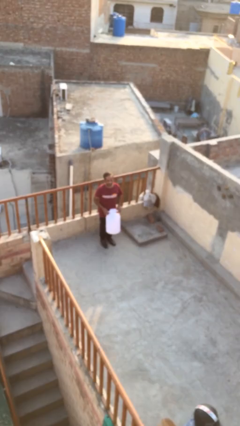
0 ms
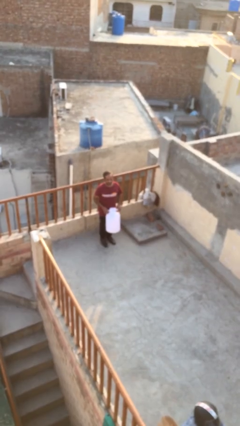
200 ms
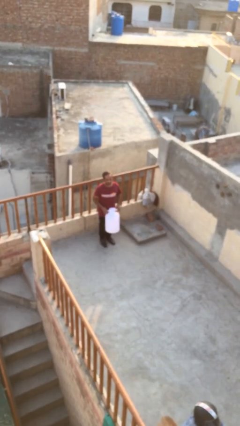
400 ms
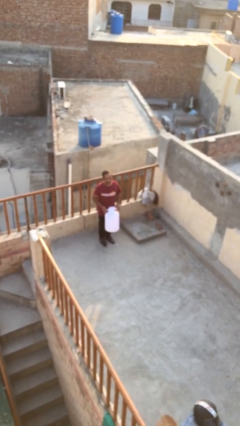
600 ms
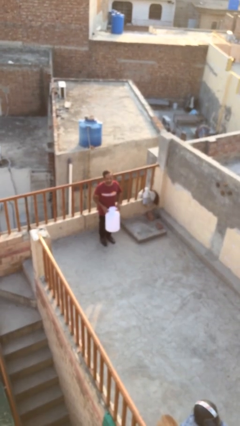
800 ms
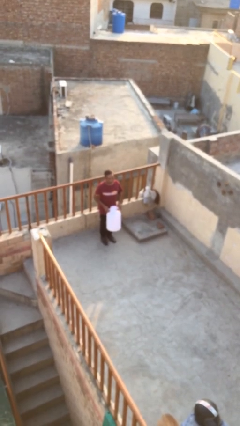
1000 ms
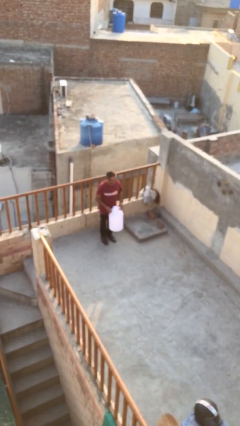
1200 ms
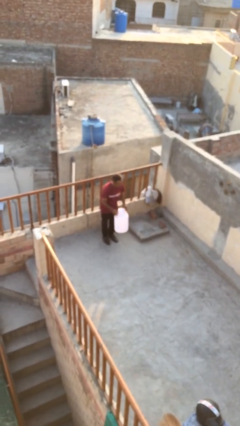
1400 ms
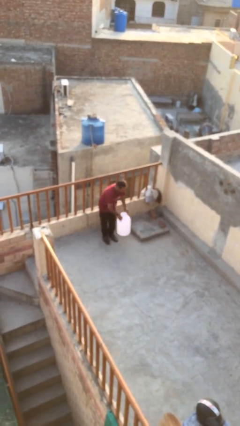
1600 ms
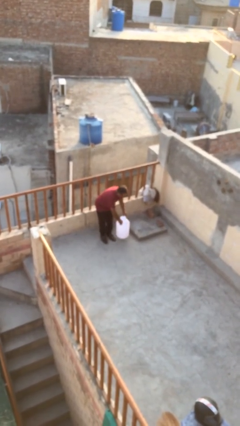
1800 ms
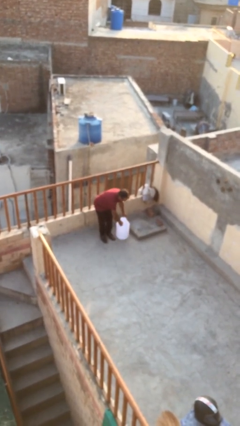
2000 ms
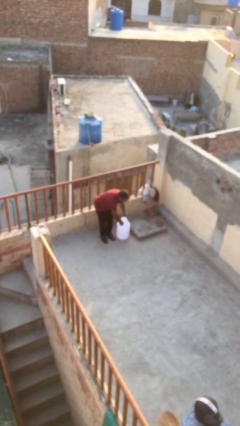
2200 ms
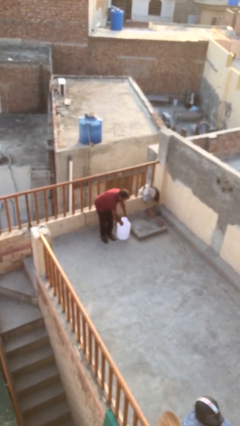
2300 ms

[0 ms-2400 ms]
person puts down object on floor

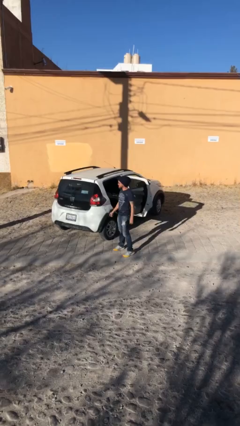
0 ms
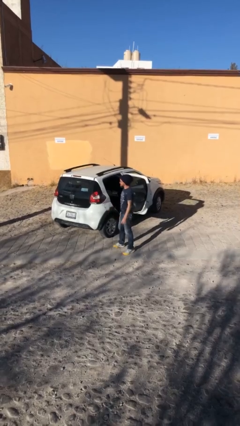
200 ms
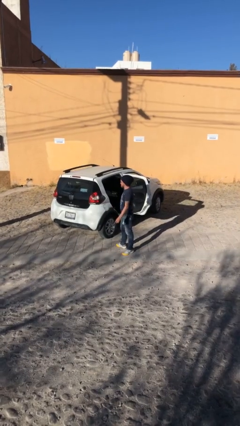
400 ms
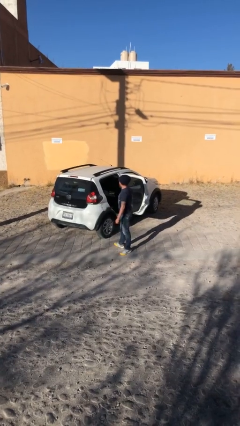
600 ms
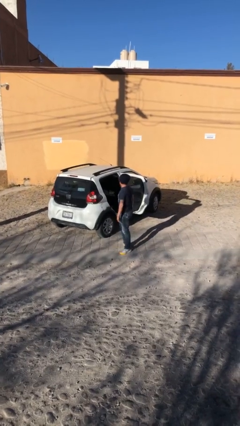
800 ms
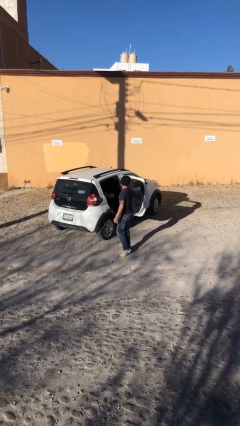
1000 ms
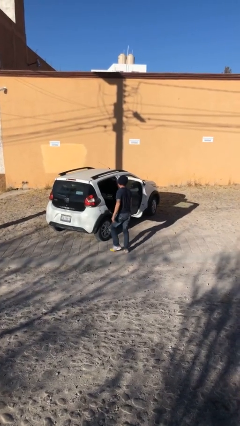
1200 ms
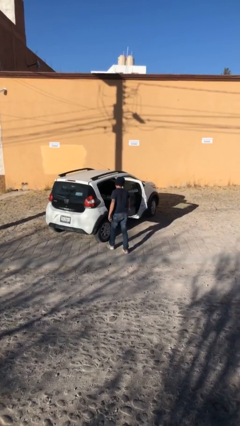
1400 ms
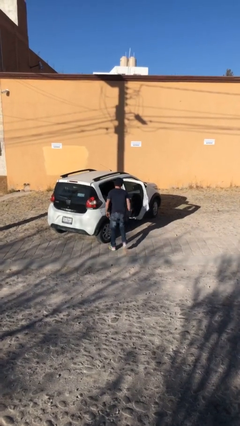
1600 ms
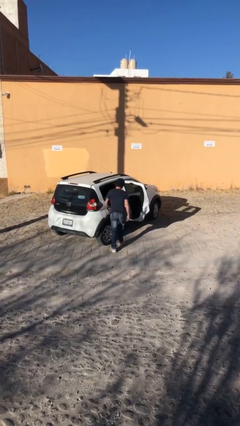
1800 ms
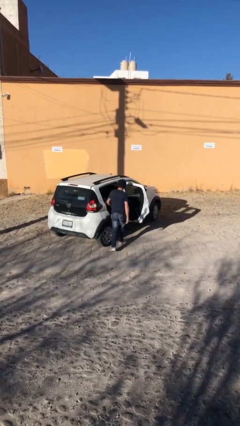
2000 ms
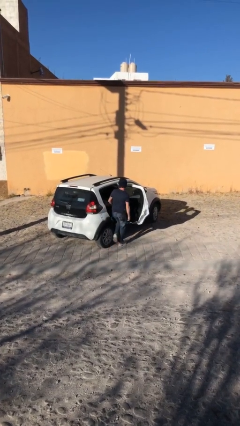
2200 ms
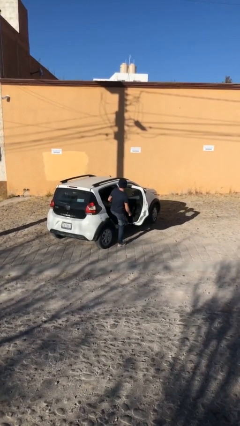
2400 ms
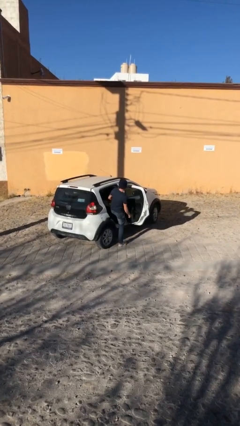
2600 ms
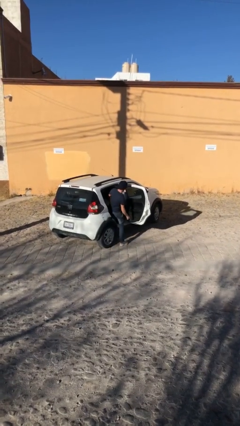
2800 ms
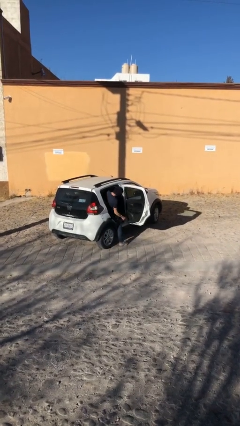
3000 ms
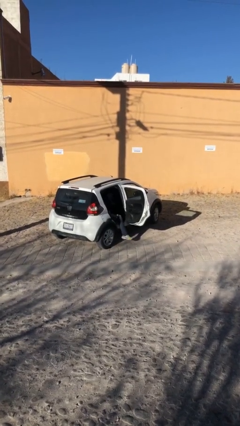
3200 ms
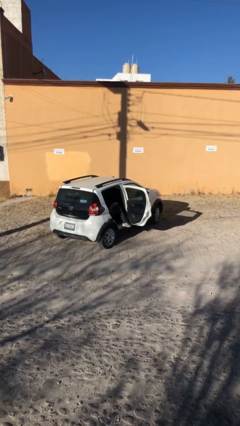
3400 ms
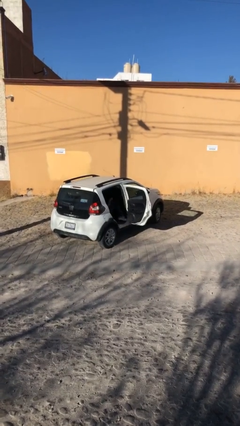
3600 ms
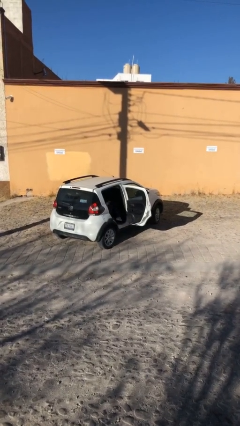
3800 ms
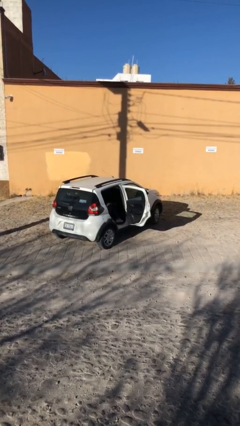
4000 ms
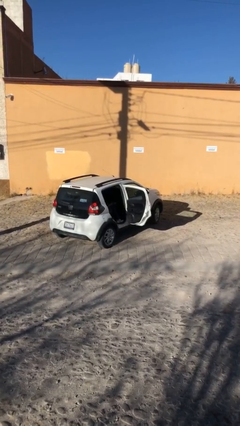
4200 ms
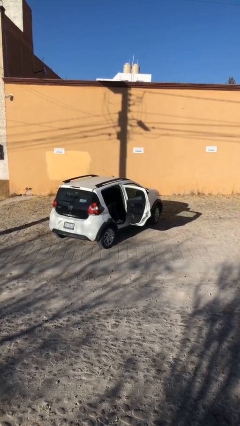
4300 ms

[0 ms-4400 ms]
person enters car

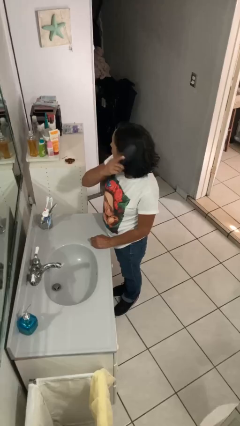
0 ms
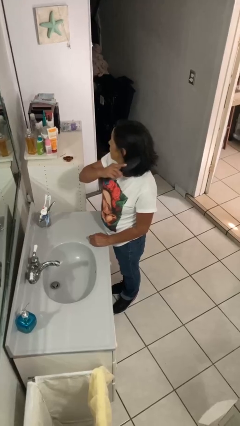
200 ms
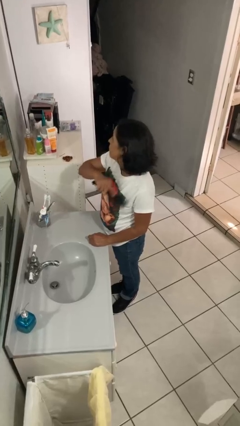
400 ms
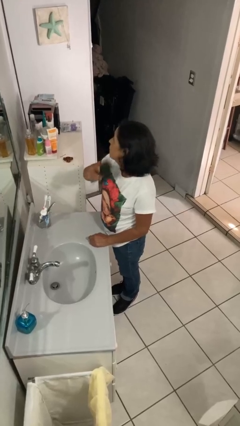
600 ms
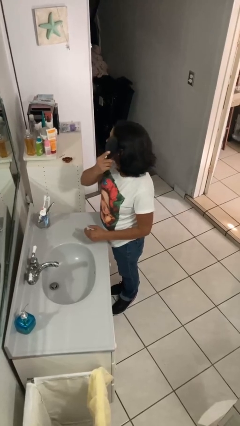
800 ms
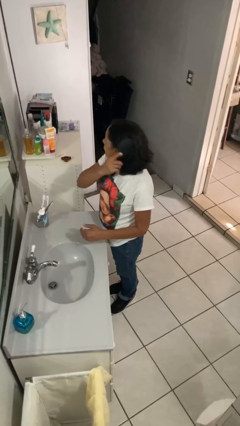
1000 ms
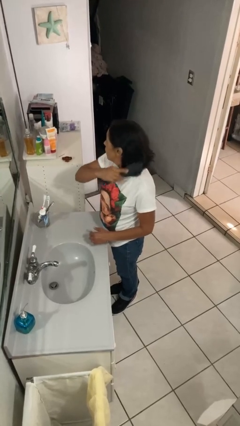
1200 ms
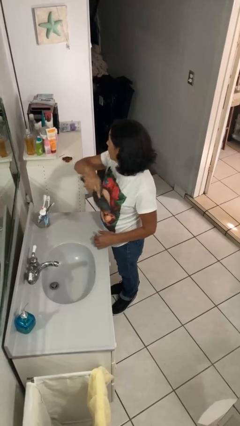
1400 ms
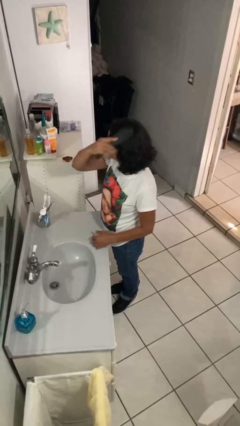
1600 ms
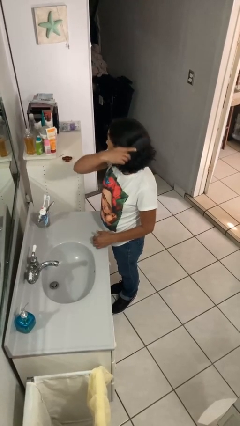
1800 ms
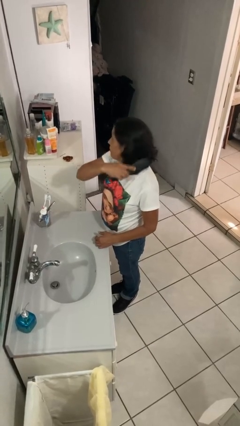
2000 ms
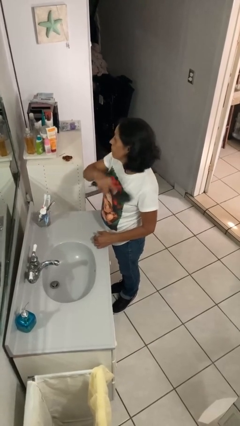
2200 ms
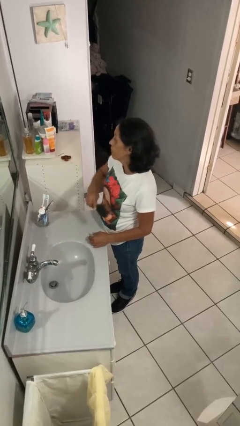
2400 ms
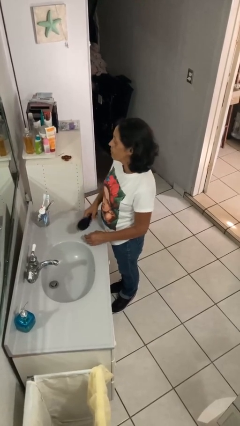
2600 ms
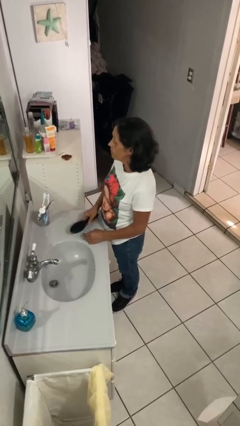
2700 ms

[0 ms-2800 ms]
person brushes hair

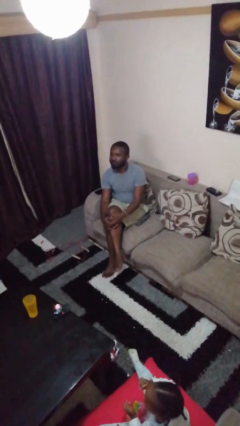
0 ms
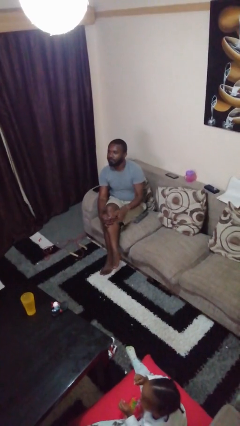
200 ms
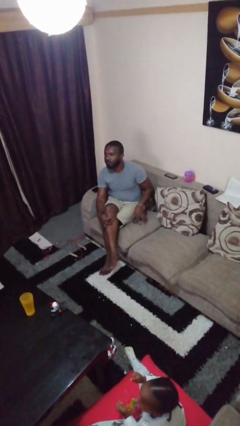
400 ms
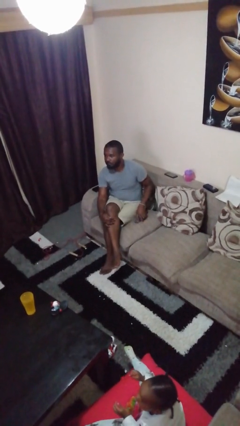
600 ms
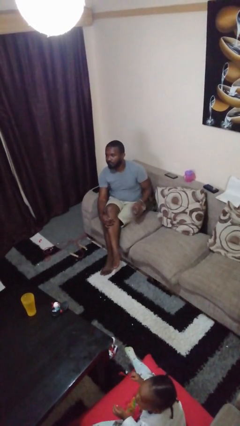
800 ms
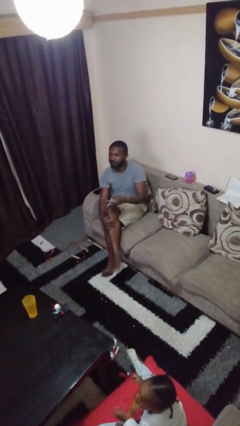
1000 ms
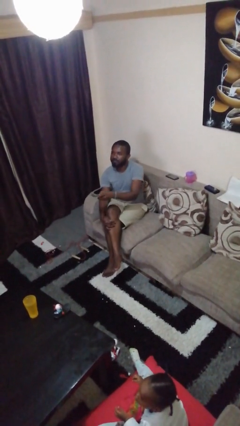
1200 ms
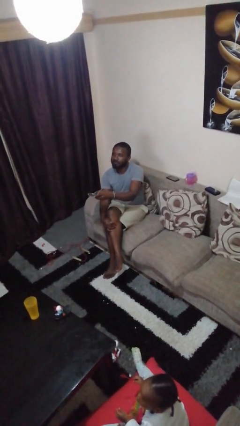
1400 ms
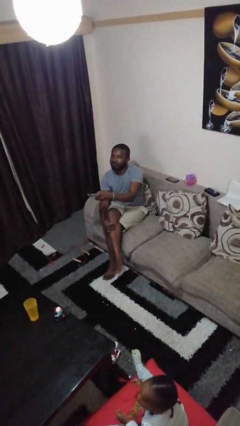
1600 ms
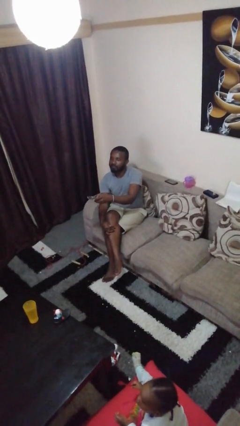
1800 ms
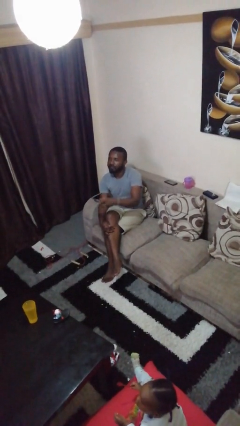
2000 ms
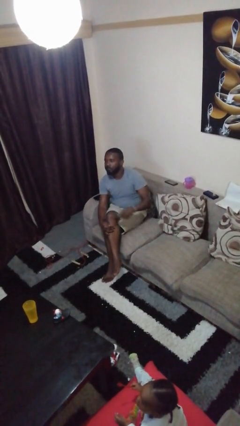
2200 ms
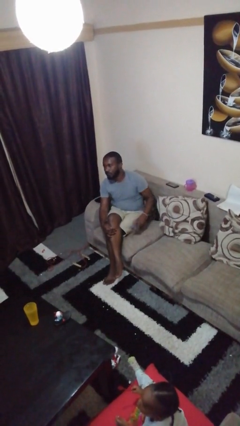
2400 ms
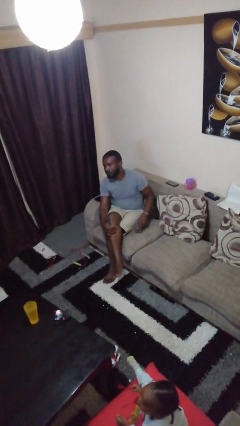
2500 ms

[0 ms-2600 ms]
person uses television remote

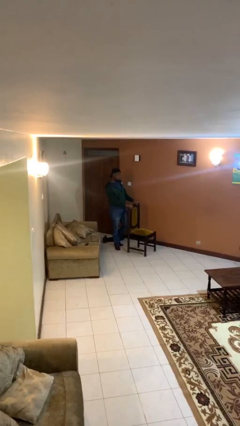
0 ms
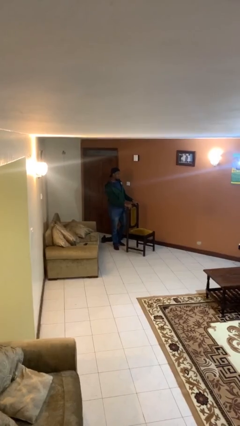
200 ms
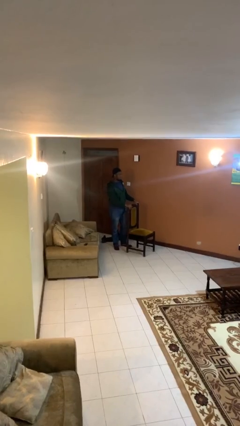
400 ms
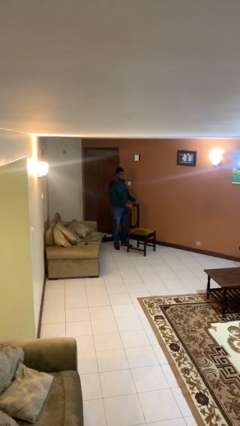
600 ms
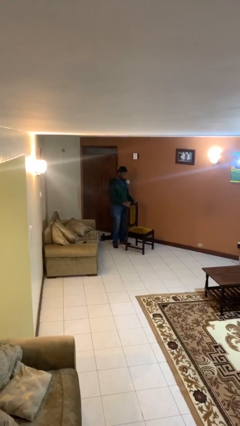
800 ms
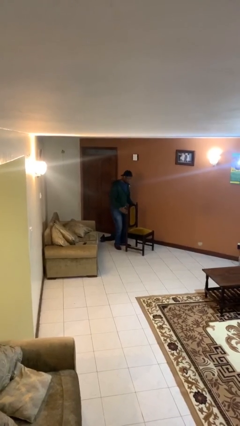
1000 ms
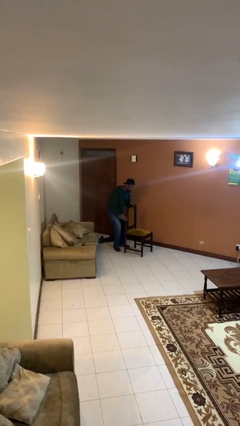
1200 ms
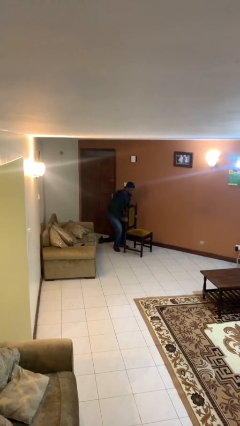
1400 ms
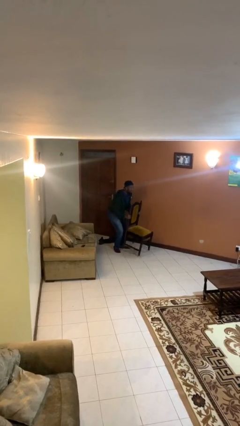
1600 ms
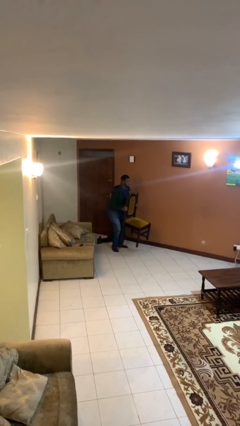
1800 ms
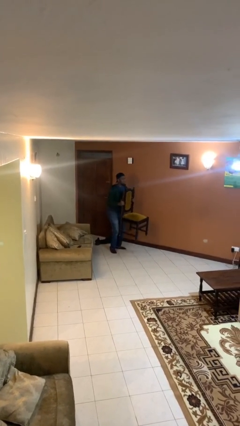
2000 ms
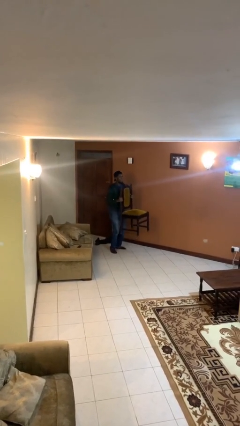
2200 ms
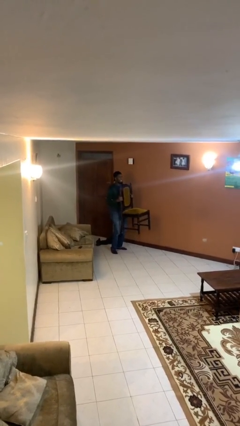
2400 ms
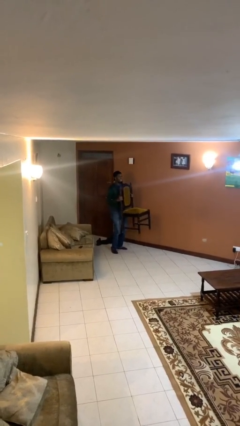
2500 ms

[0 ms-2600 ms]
person picks up object from floor

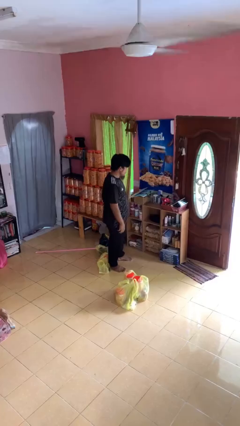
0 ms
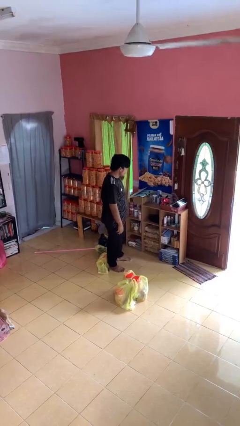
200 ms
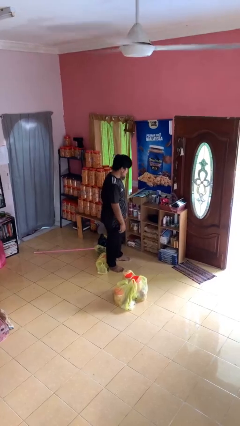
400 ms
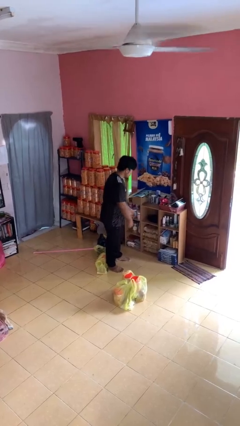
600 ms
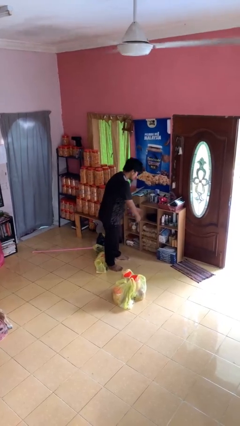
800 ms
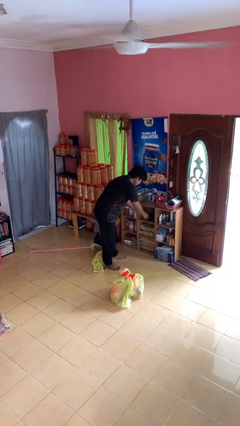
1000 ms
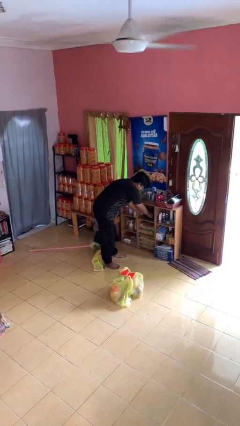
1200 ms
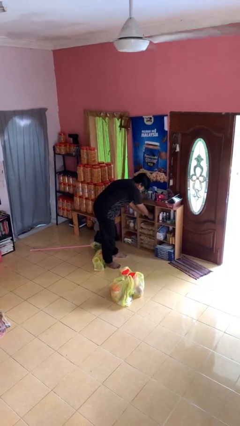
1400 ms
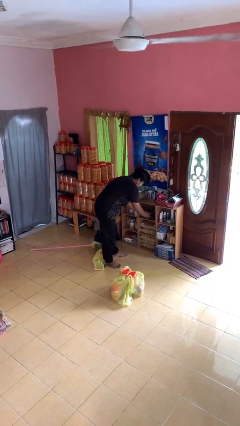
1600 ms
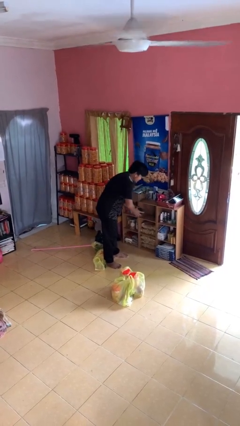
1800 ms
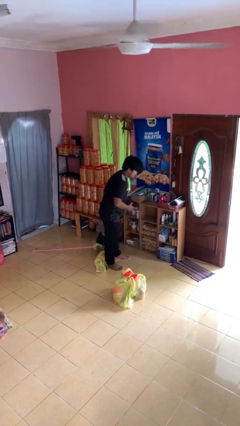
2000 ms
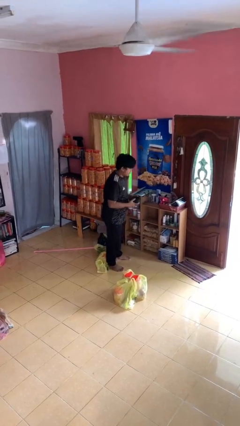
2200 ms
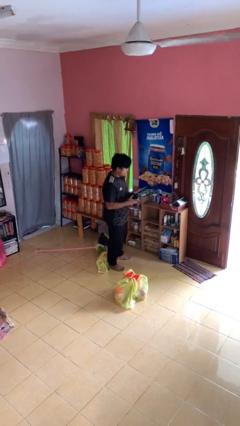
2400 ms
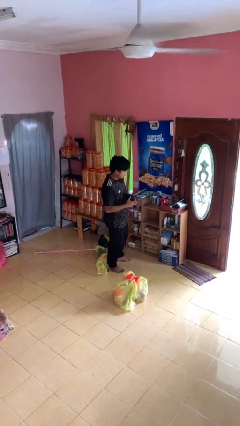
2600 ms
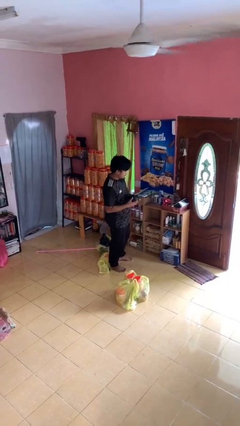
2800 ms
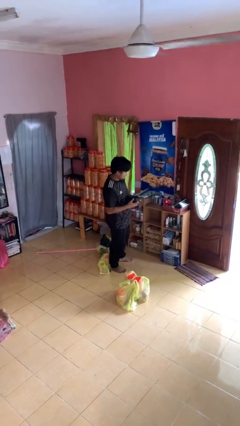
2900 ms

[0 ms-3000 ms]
person takes object from cabinet
